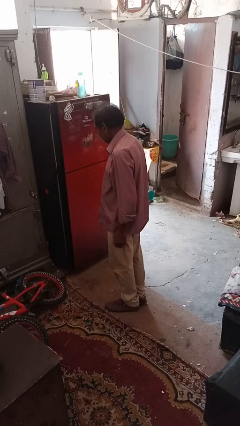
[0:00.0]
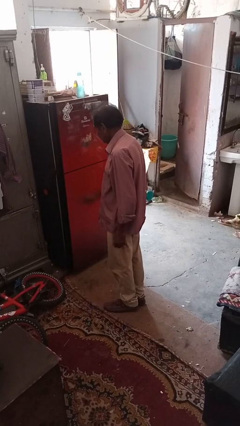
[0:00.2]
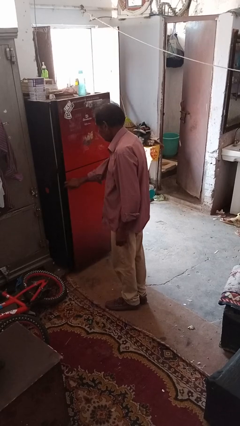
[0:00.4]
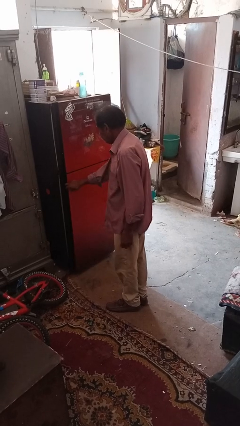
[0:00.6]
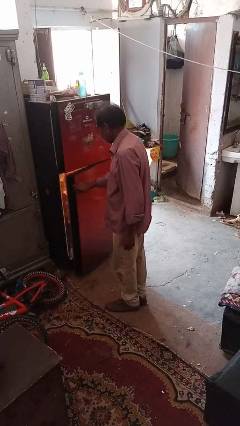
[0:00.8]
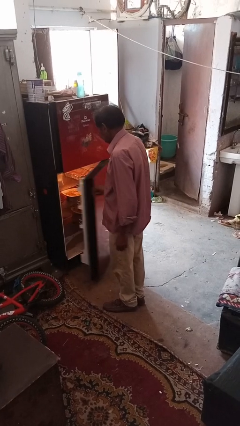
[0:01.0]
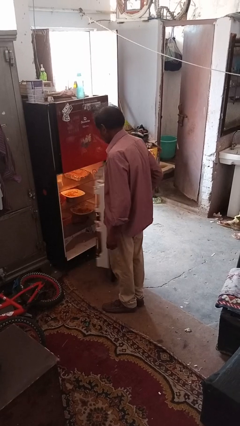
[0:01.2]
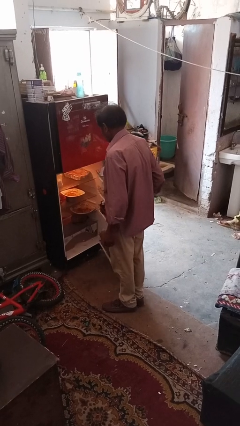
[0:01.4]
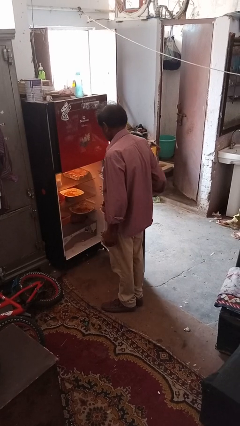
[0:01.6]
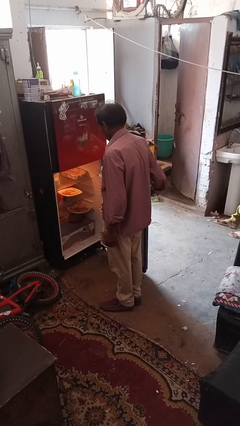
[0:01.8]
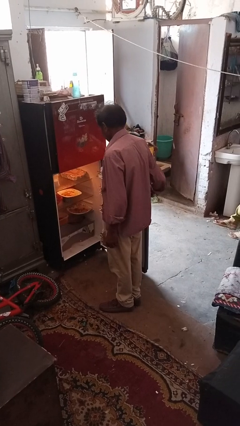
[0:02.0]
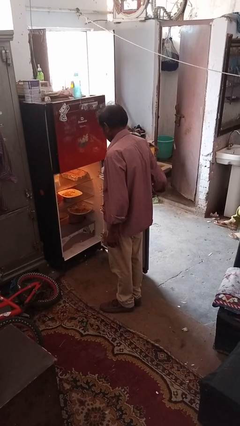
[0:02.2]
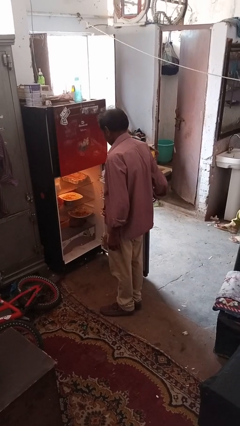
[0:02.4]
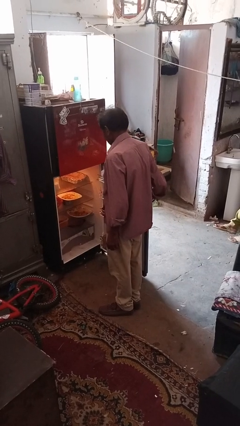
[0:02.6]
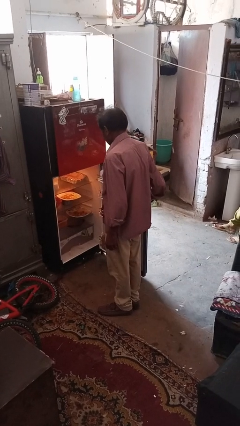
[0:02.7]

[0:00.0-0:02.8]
person opens refrigerator

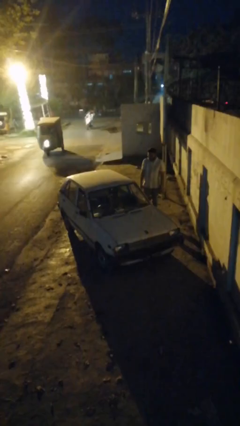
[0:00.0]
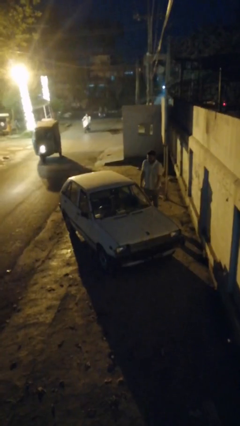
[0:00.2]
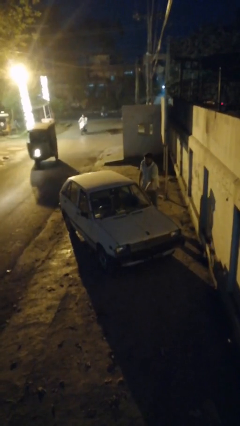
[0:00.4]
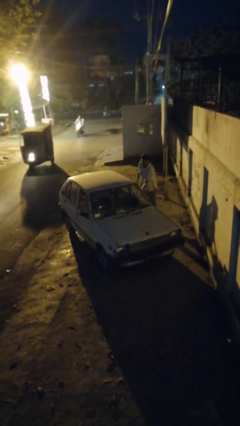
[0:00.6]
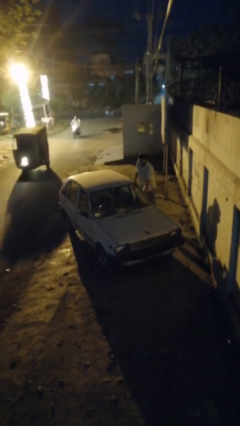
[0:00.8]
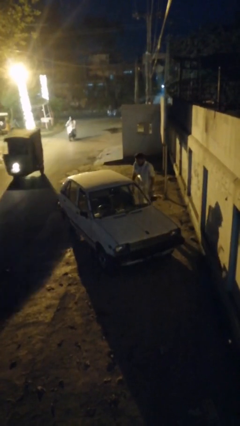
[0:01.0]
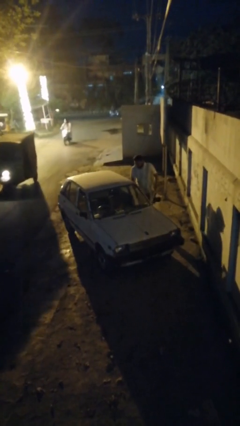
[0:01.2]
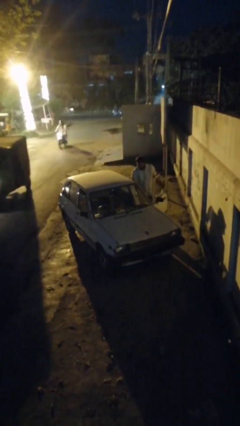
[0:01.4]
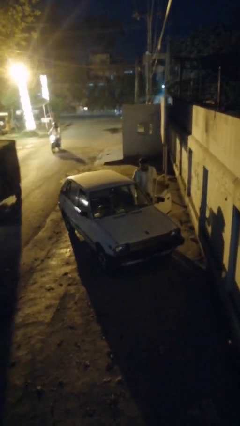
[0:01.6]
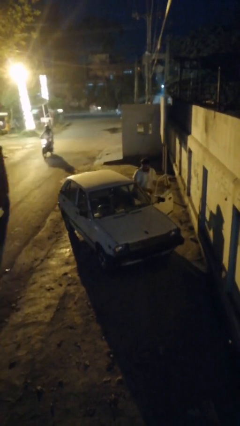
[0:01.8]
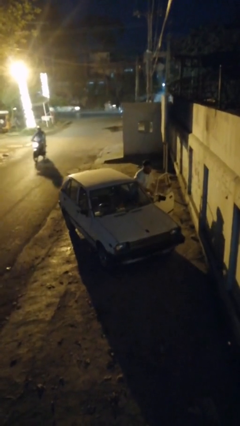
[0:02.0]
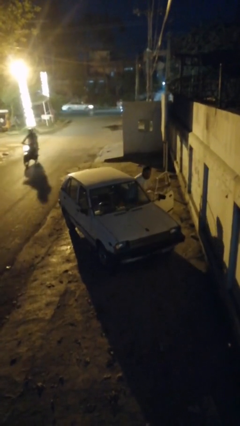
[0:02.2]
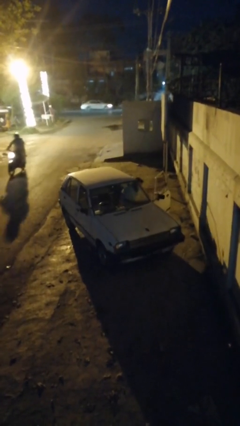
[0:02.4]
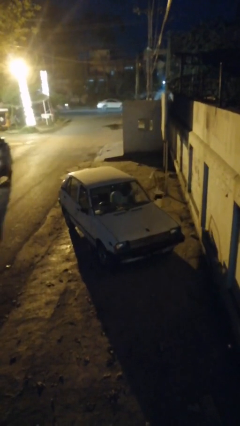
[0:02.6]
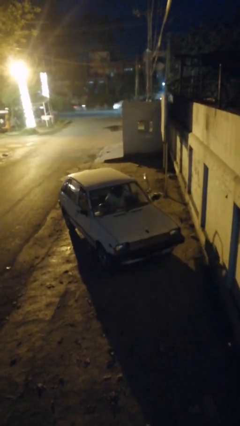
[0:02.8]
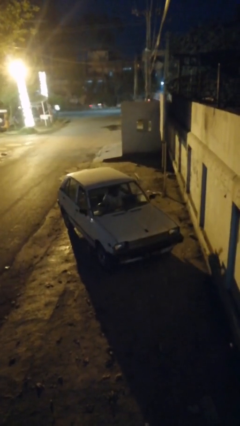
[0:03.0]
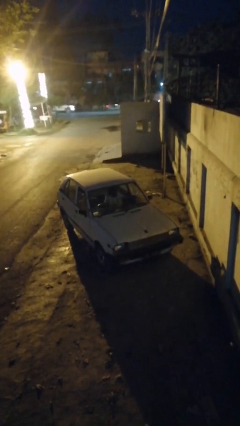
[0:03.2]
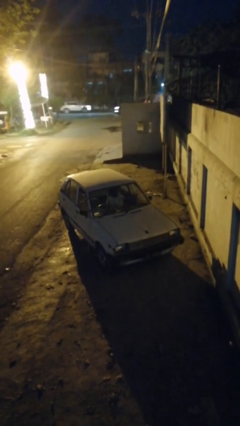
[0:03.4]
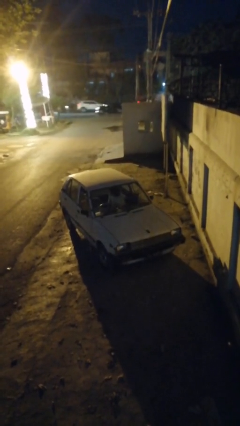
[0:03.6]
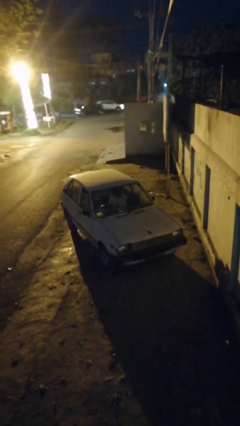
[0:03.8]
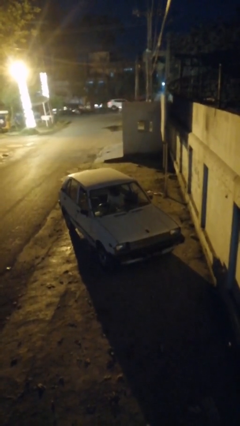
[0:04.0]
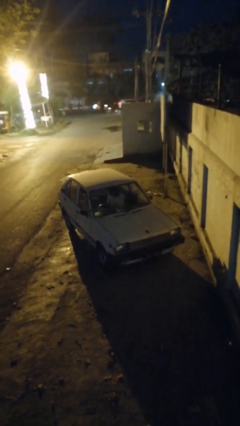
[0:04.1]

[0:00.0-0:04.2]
car picks up person

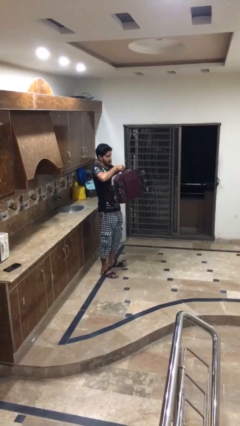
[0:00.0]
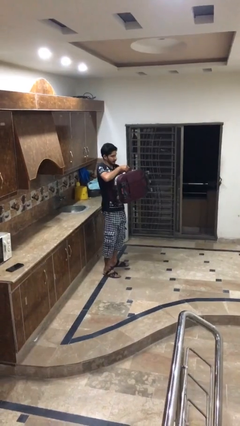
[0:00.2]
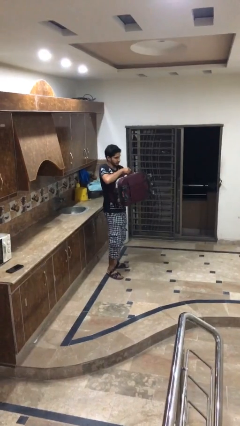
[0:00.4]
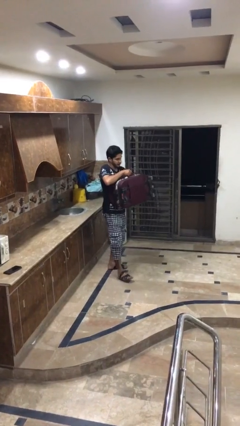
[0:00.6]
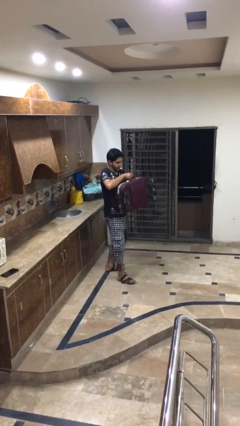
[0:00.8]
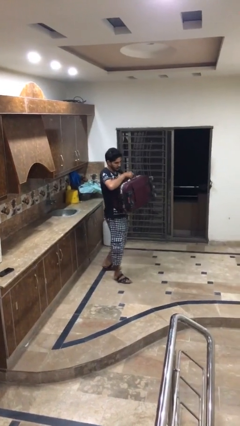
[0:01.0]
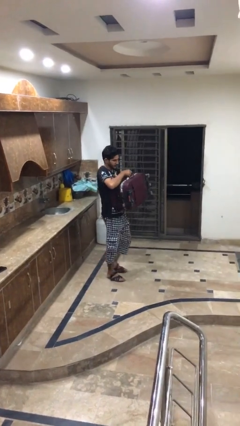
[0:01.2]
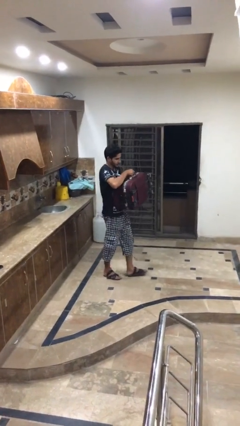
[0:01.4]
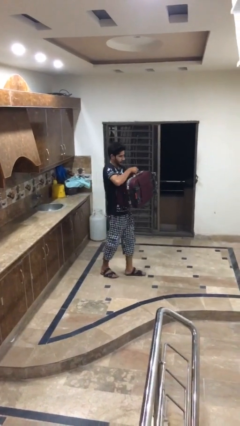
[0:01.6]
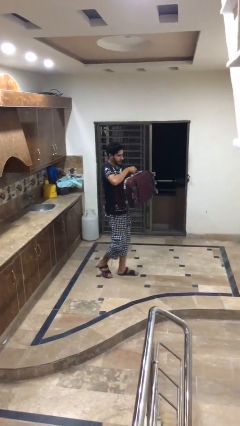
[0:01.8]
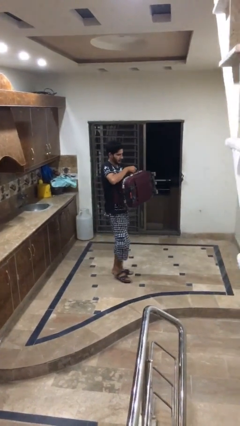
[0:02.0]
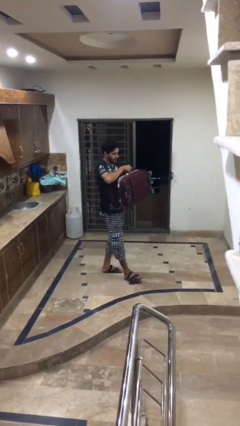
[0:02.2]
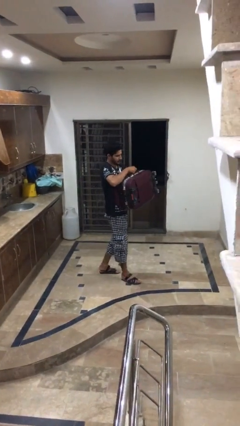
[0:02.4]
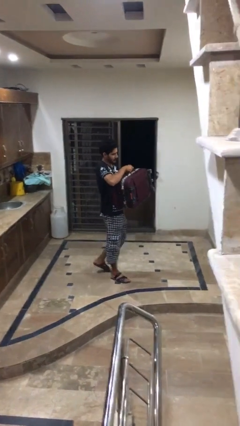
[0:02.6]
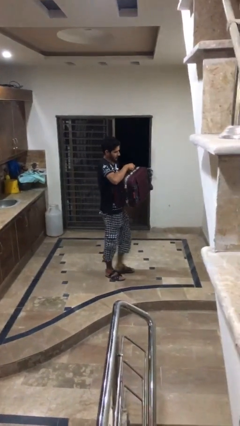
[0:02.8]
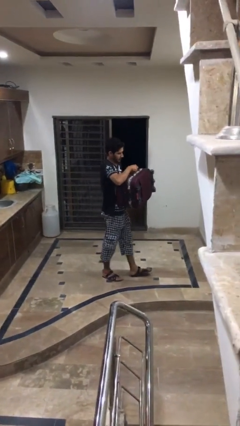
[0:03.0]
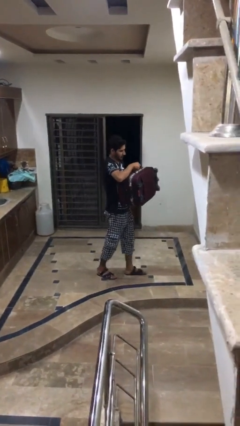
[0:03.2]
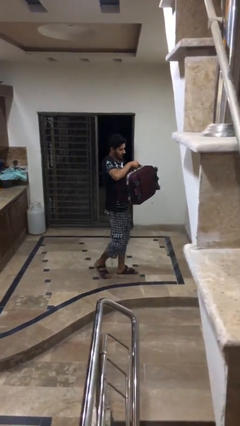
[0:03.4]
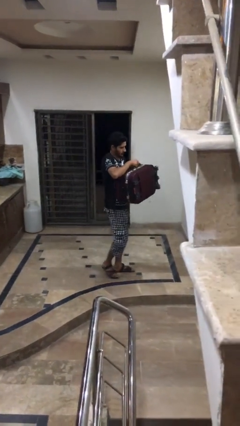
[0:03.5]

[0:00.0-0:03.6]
person carries heavy object

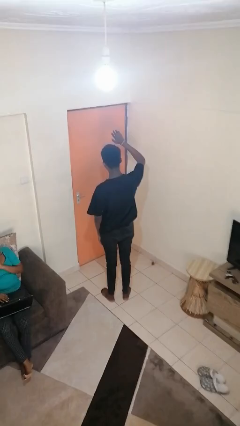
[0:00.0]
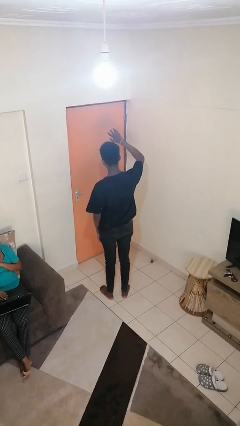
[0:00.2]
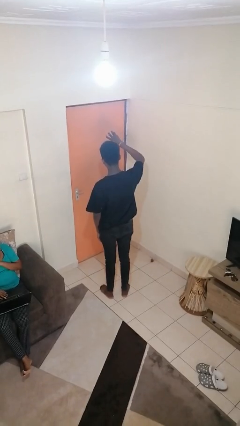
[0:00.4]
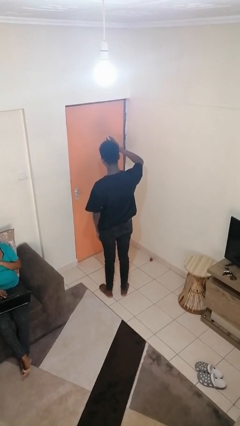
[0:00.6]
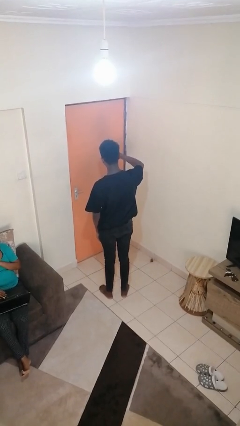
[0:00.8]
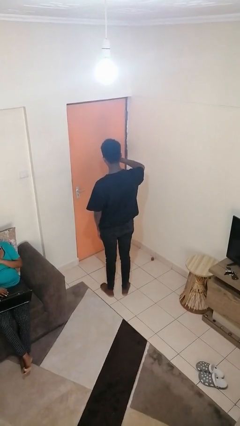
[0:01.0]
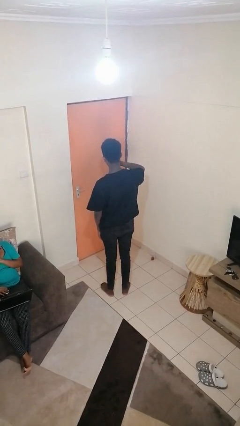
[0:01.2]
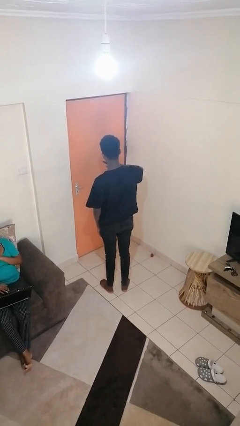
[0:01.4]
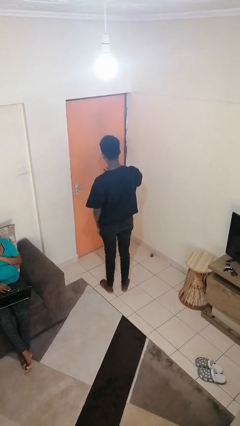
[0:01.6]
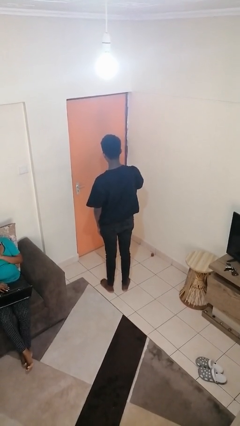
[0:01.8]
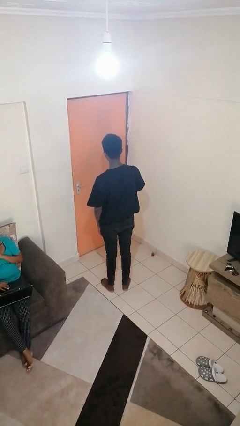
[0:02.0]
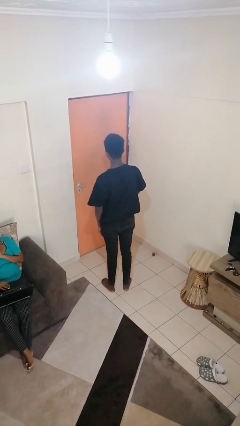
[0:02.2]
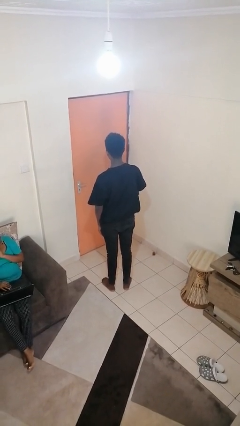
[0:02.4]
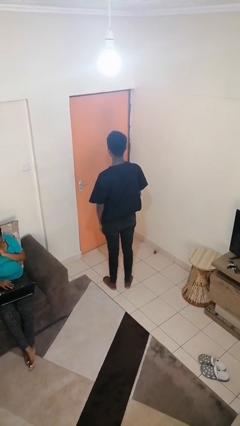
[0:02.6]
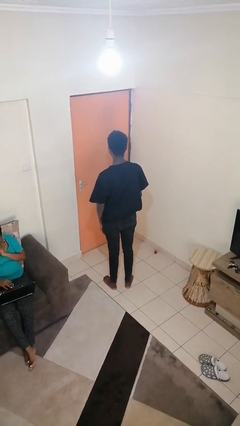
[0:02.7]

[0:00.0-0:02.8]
person gestures swipe down

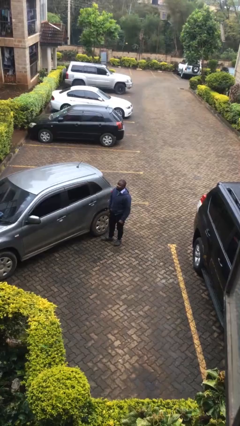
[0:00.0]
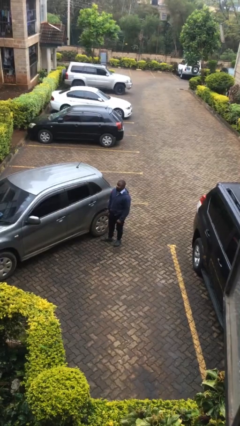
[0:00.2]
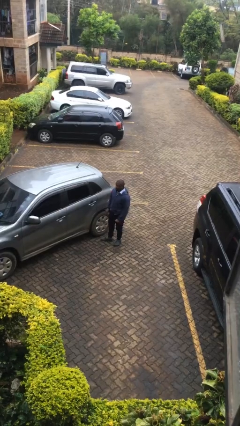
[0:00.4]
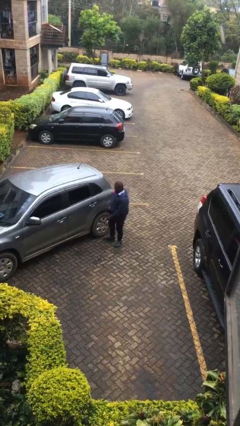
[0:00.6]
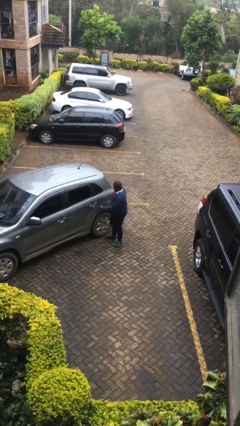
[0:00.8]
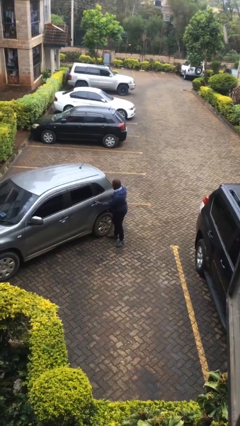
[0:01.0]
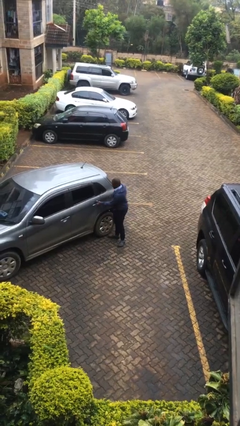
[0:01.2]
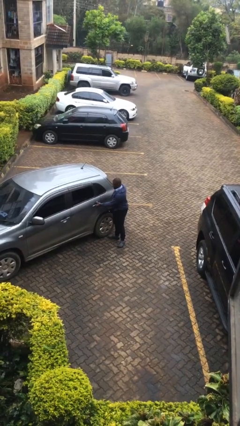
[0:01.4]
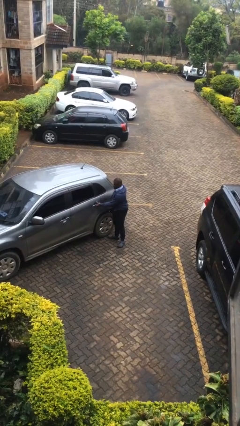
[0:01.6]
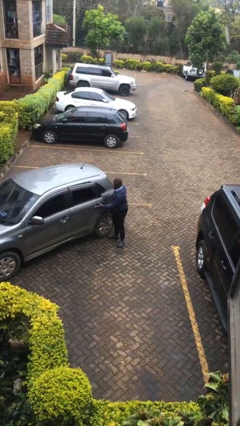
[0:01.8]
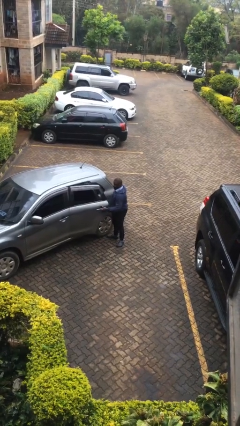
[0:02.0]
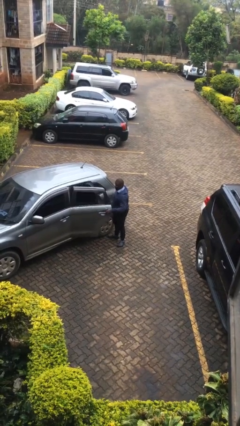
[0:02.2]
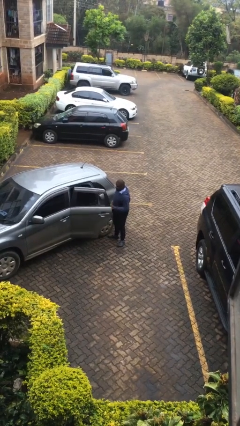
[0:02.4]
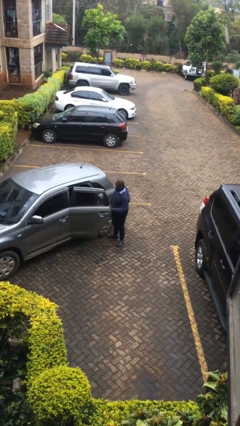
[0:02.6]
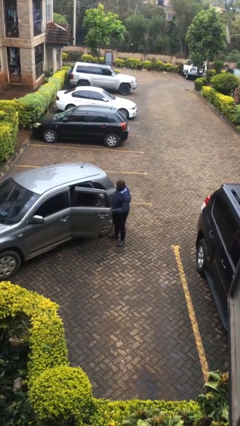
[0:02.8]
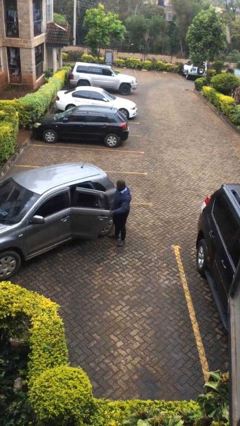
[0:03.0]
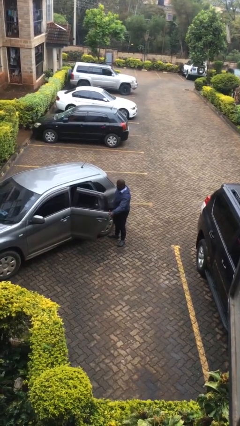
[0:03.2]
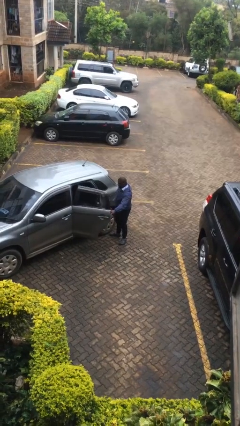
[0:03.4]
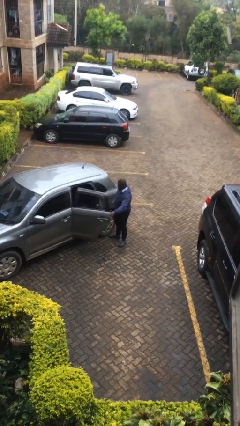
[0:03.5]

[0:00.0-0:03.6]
person opens car door
